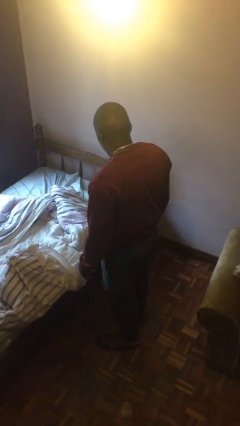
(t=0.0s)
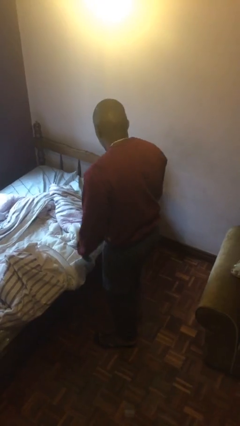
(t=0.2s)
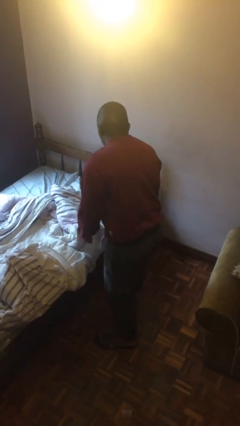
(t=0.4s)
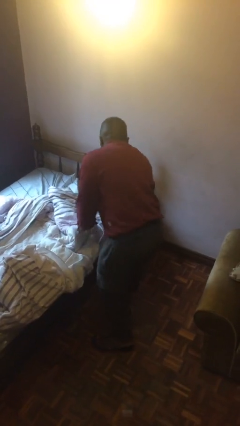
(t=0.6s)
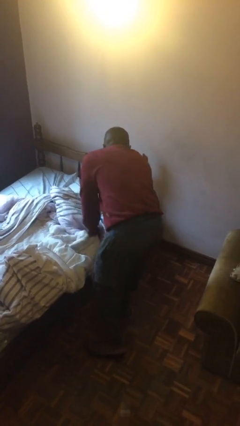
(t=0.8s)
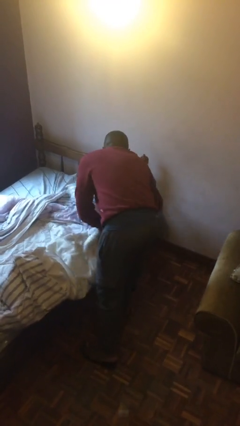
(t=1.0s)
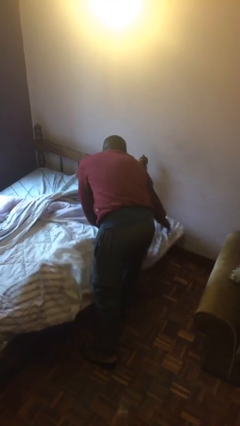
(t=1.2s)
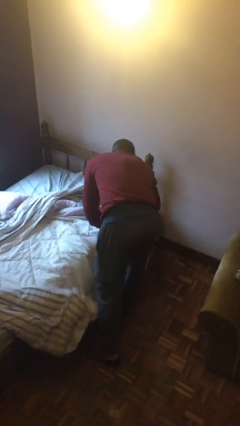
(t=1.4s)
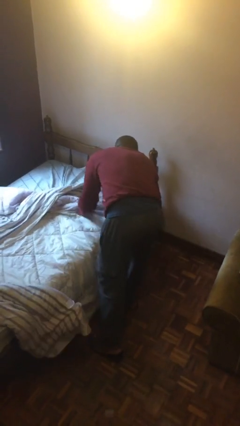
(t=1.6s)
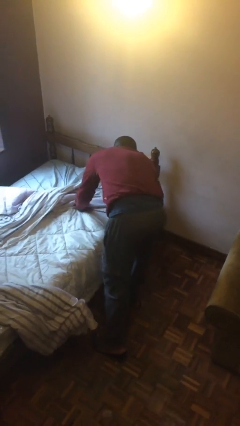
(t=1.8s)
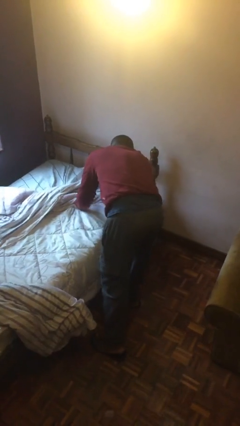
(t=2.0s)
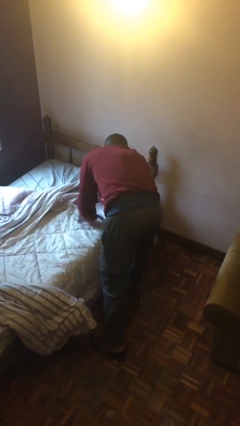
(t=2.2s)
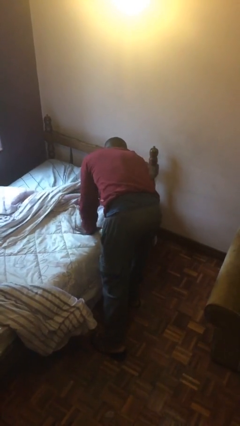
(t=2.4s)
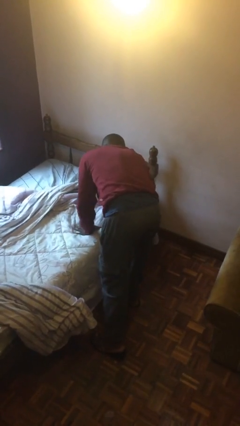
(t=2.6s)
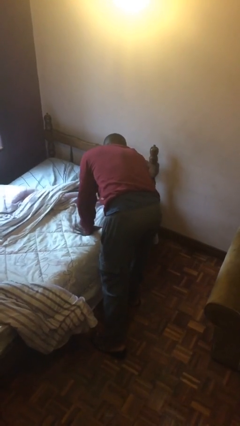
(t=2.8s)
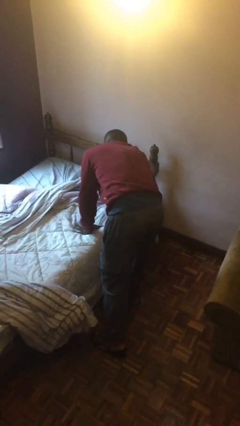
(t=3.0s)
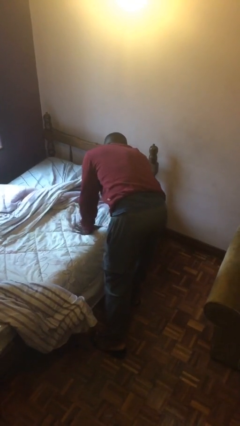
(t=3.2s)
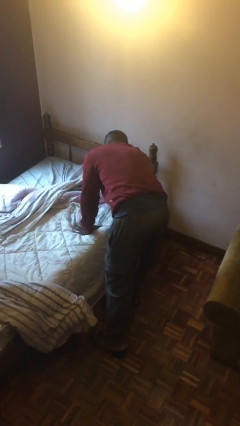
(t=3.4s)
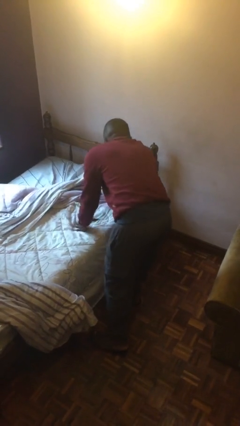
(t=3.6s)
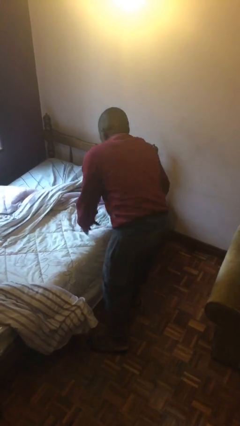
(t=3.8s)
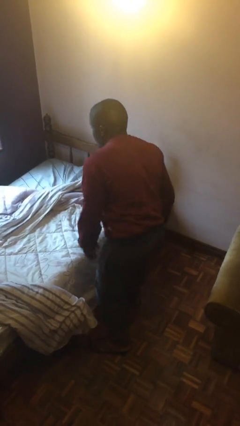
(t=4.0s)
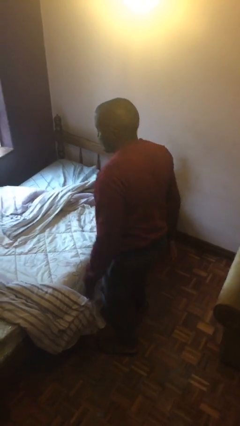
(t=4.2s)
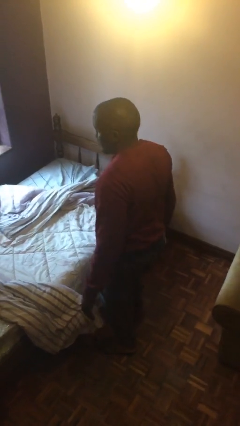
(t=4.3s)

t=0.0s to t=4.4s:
person makes bed

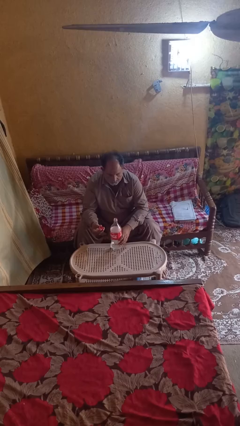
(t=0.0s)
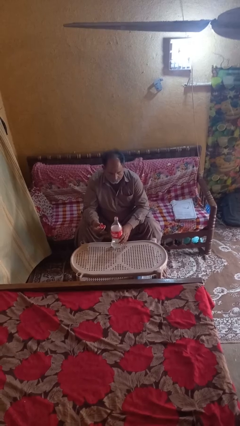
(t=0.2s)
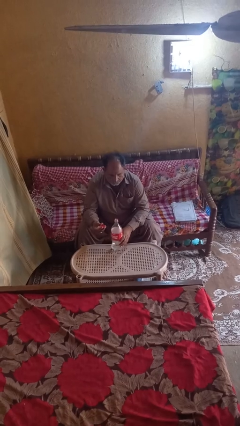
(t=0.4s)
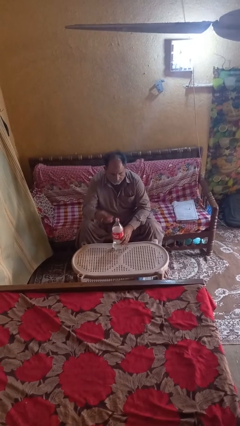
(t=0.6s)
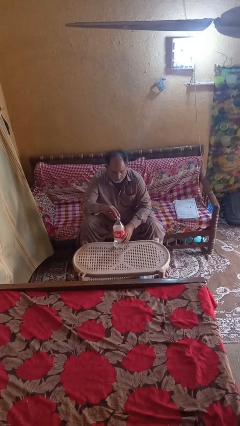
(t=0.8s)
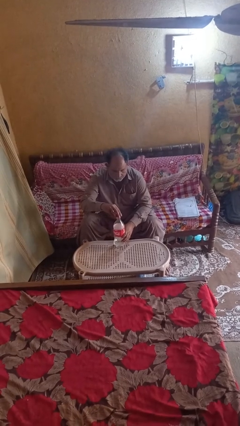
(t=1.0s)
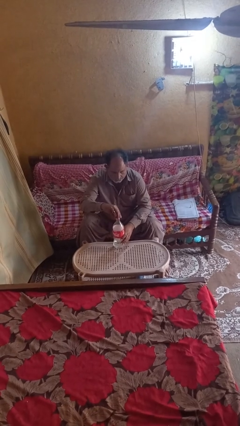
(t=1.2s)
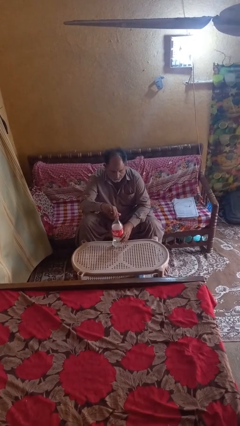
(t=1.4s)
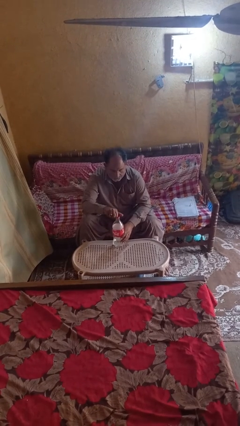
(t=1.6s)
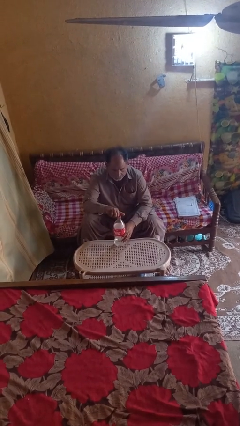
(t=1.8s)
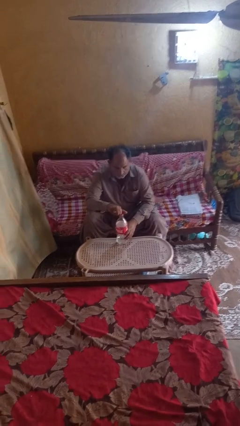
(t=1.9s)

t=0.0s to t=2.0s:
person screws lid to bottle

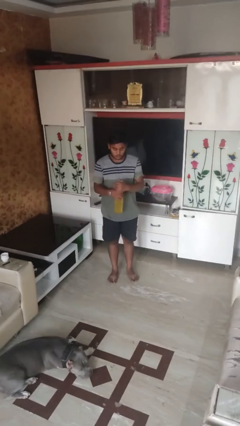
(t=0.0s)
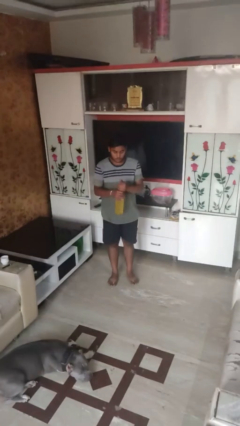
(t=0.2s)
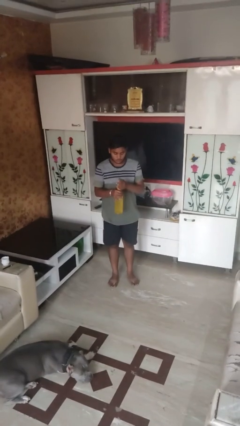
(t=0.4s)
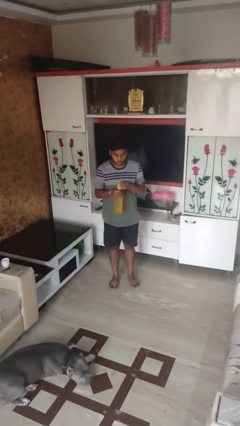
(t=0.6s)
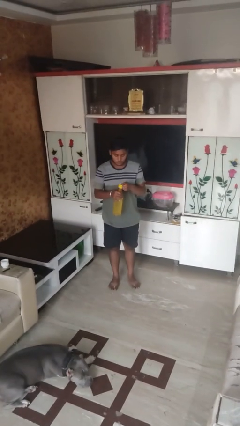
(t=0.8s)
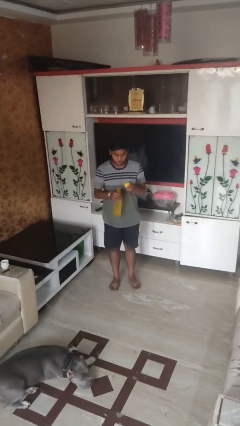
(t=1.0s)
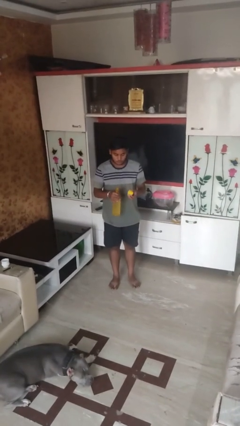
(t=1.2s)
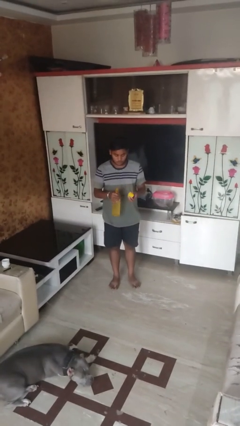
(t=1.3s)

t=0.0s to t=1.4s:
person unscrews lid from bottle

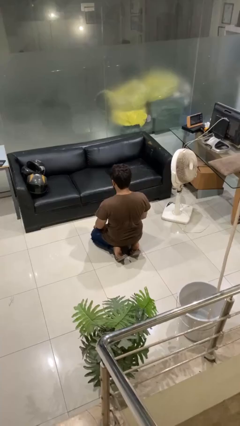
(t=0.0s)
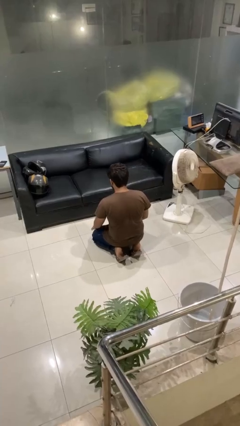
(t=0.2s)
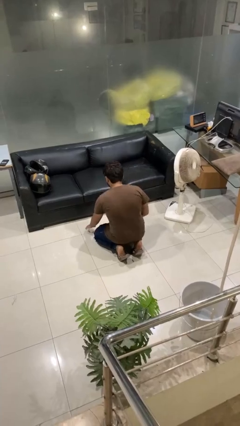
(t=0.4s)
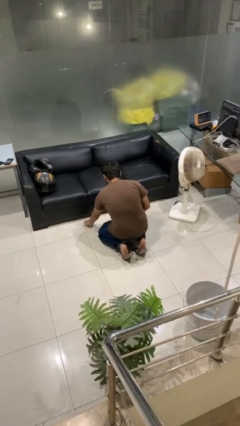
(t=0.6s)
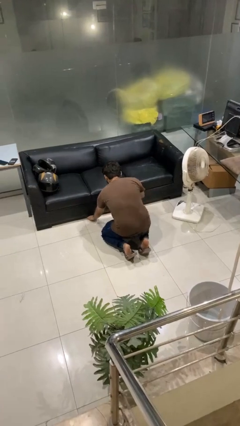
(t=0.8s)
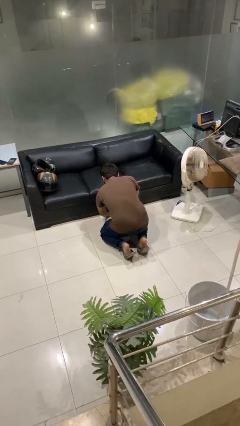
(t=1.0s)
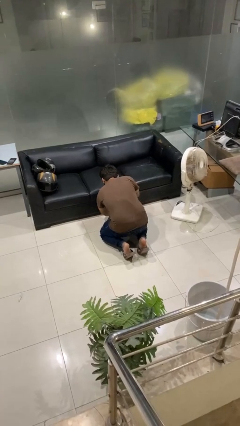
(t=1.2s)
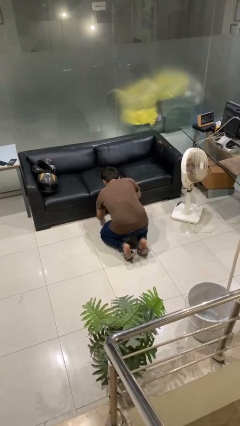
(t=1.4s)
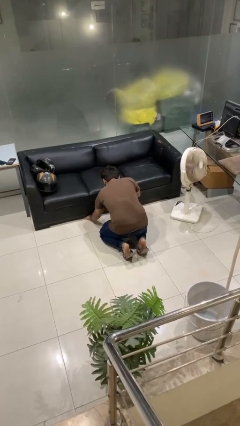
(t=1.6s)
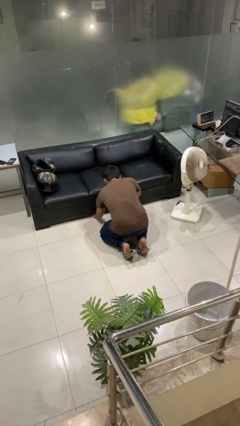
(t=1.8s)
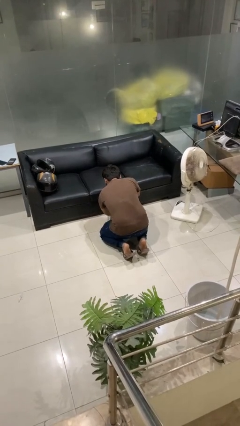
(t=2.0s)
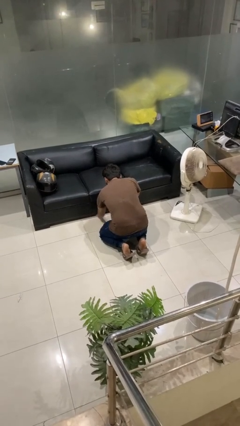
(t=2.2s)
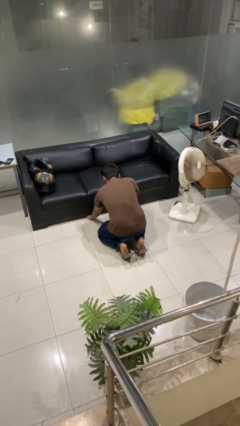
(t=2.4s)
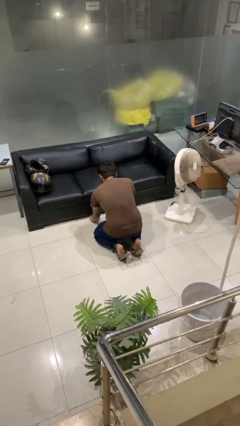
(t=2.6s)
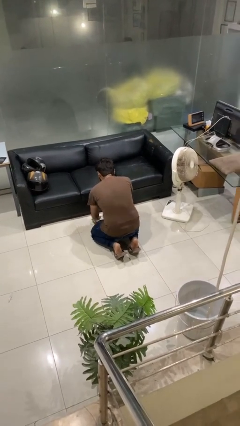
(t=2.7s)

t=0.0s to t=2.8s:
person searches under couch

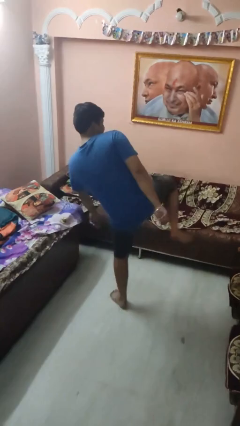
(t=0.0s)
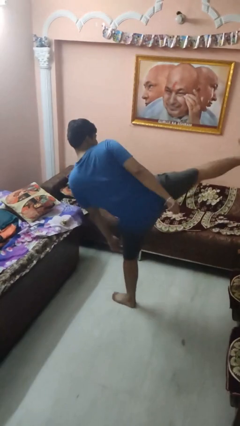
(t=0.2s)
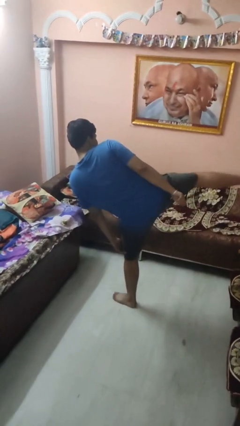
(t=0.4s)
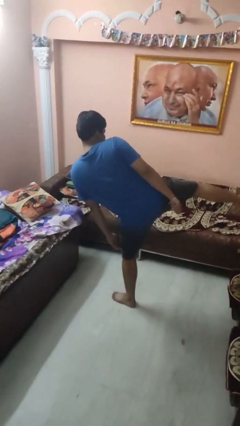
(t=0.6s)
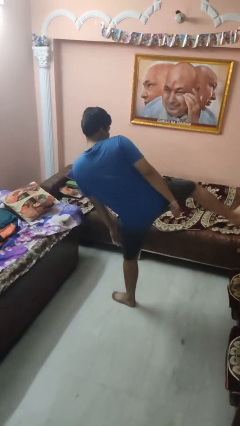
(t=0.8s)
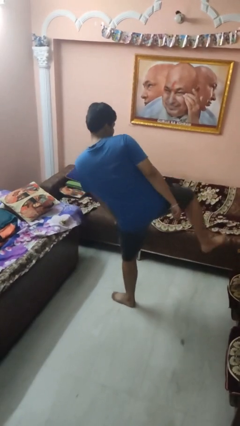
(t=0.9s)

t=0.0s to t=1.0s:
person karate kicks

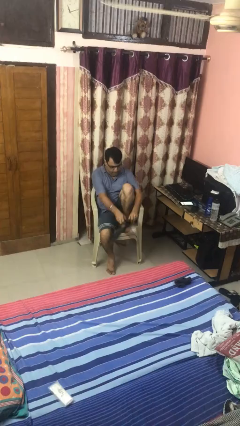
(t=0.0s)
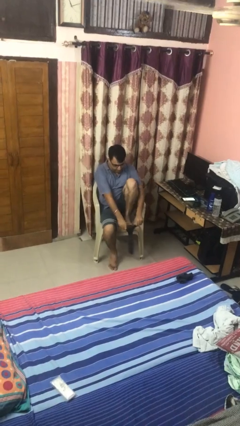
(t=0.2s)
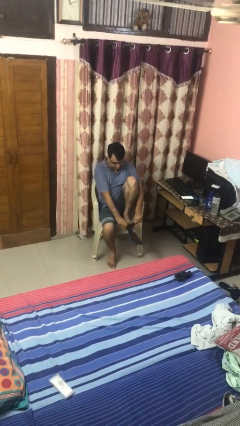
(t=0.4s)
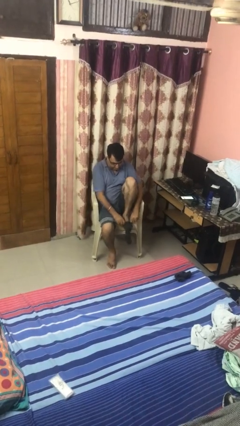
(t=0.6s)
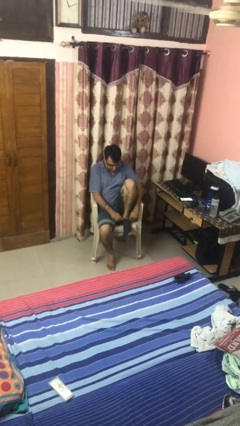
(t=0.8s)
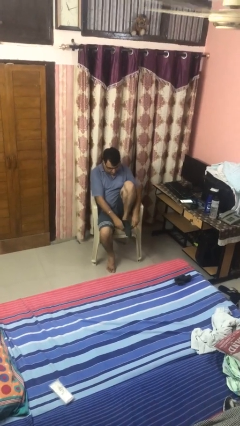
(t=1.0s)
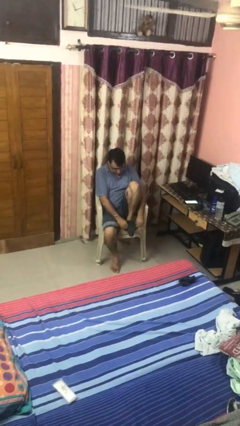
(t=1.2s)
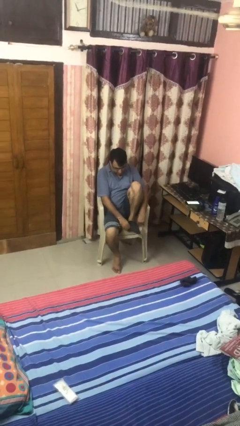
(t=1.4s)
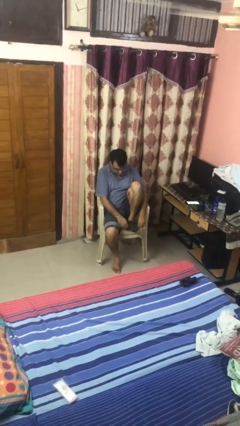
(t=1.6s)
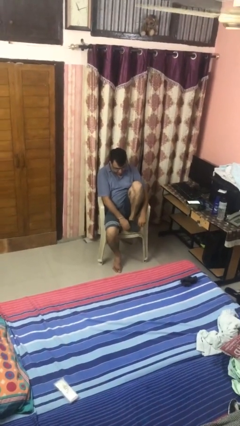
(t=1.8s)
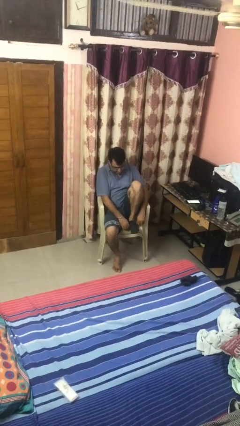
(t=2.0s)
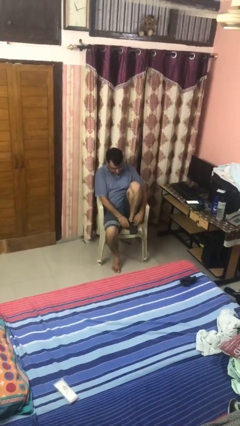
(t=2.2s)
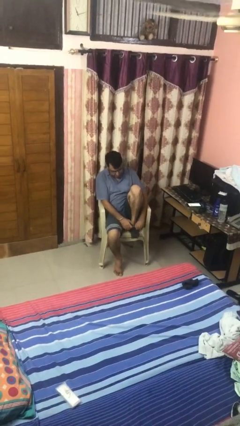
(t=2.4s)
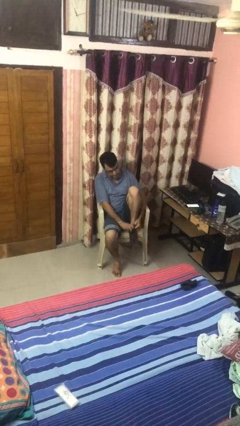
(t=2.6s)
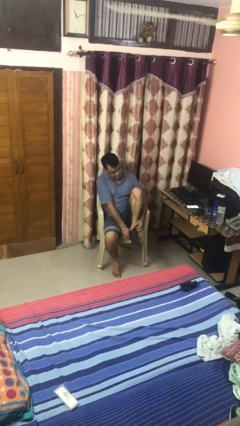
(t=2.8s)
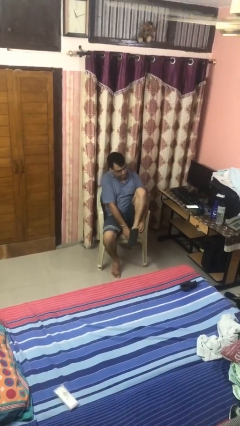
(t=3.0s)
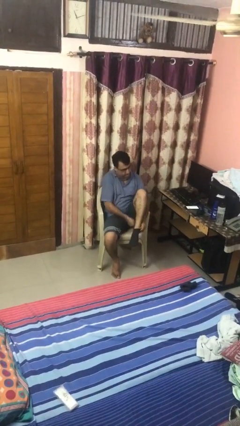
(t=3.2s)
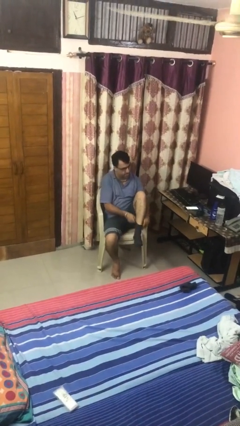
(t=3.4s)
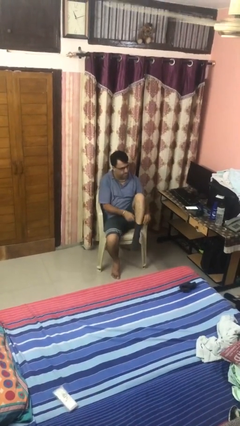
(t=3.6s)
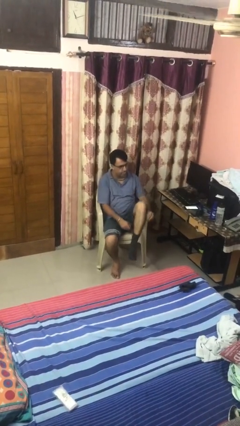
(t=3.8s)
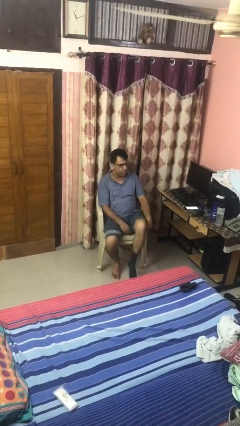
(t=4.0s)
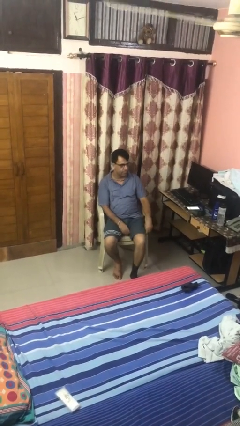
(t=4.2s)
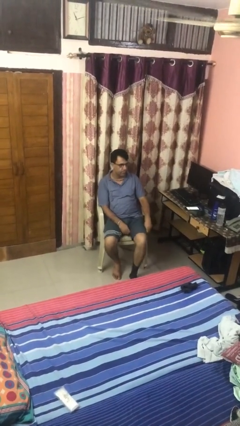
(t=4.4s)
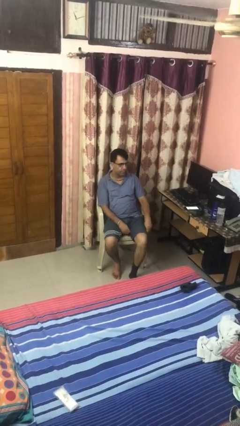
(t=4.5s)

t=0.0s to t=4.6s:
person puts on socks

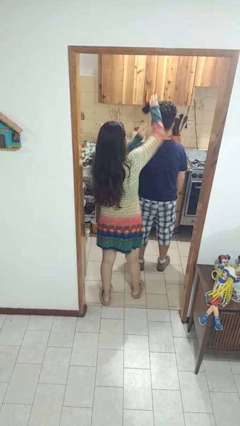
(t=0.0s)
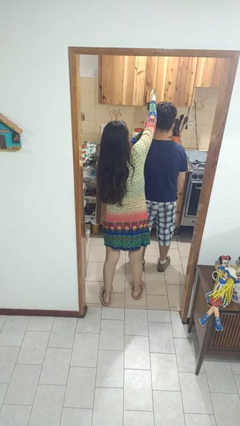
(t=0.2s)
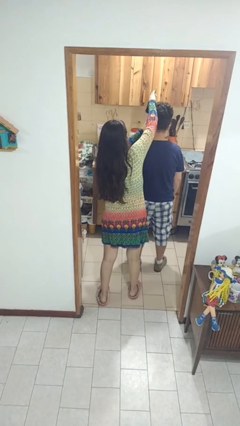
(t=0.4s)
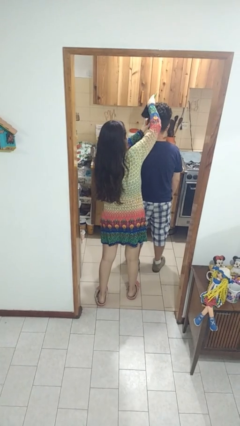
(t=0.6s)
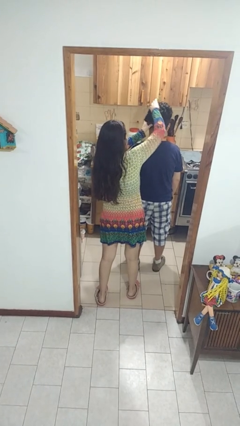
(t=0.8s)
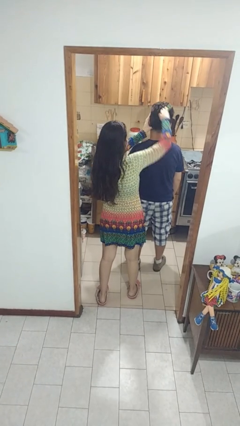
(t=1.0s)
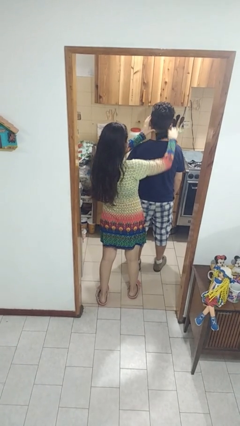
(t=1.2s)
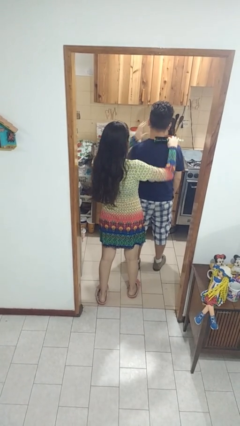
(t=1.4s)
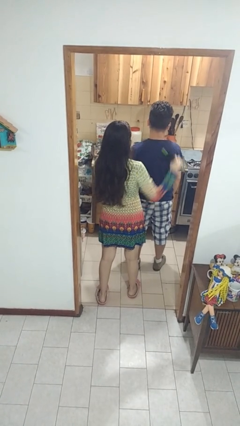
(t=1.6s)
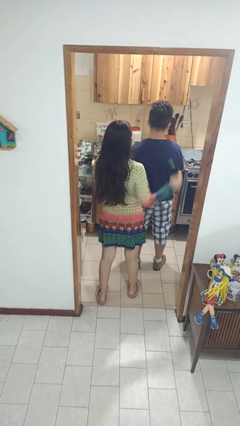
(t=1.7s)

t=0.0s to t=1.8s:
person brushes hair of person
